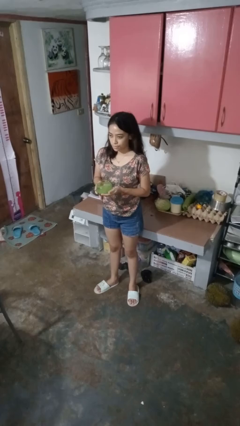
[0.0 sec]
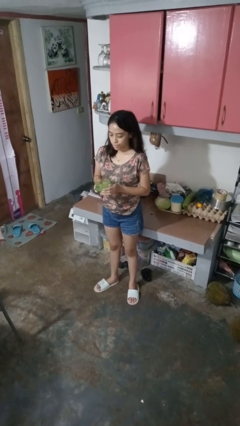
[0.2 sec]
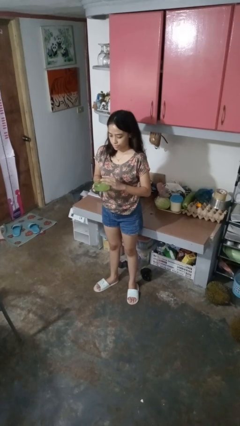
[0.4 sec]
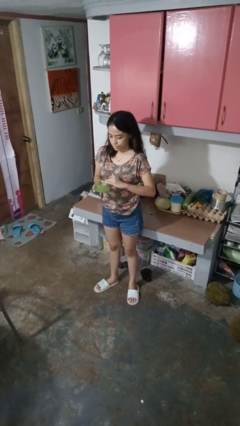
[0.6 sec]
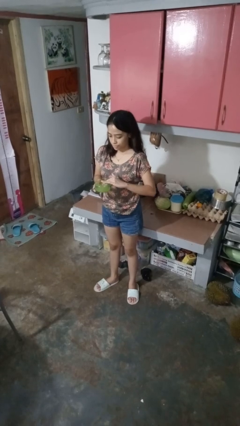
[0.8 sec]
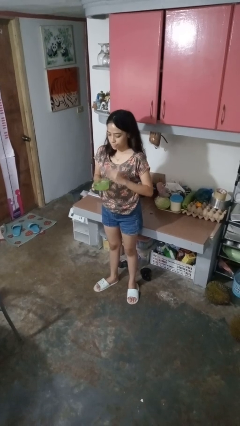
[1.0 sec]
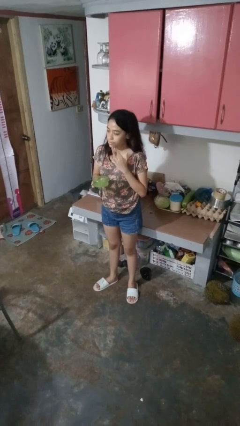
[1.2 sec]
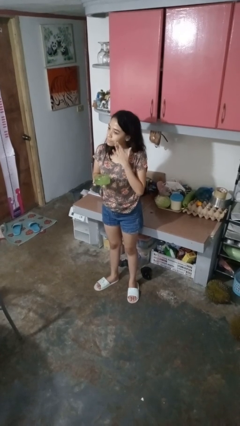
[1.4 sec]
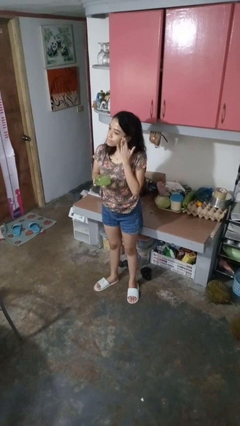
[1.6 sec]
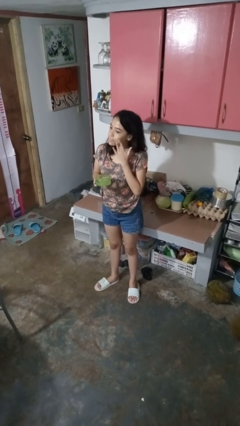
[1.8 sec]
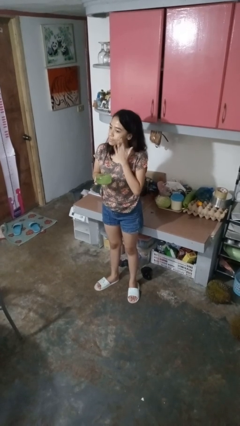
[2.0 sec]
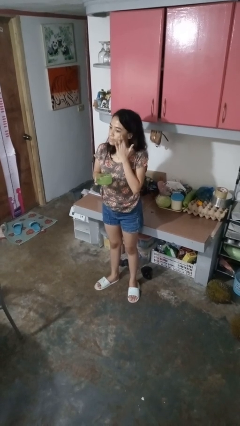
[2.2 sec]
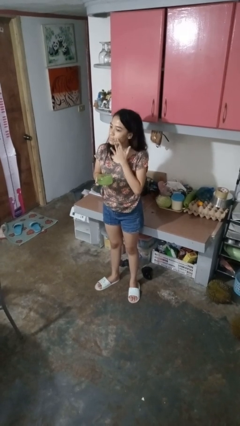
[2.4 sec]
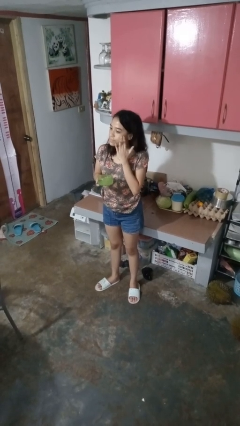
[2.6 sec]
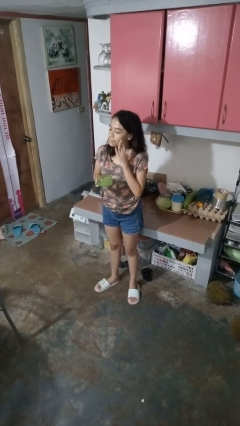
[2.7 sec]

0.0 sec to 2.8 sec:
person applies facial moisturizer

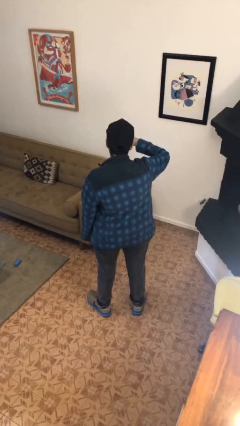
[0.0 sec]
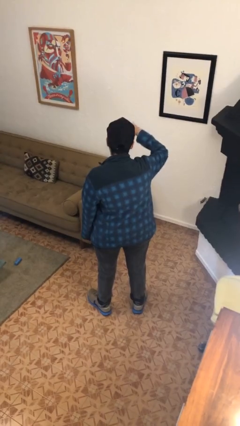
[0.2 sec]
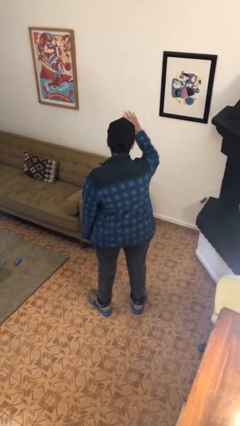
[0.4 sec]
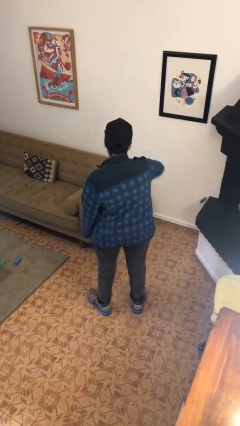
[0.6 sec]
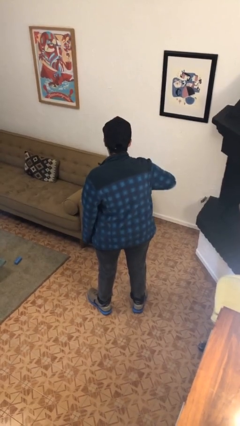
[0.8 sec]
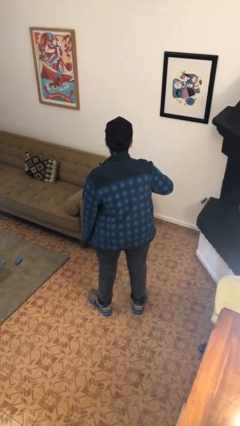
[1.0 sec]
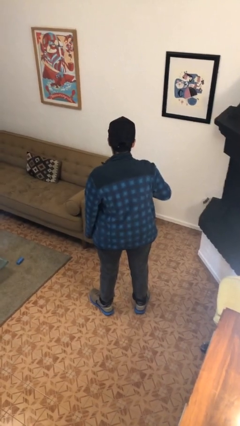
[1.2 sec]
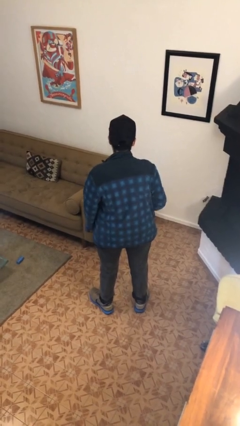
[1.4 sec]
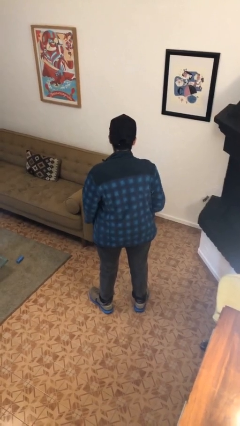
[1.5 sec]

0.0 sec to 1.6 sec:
person gestures swipe down

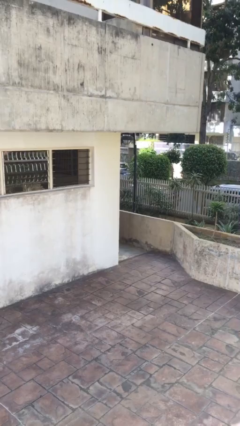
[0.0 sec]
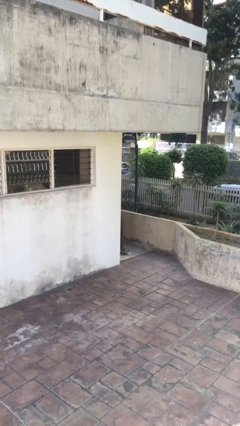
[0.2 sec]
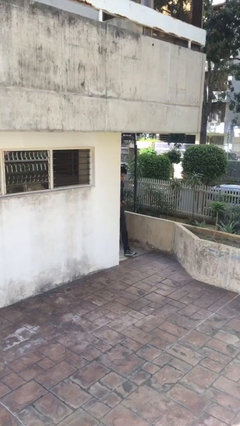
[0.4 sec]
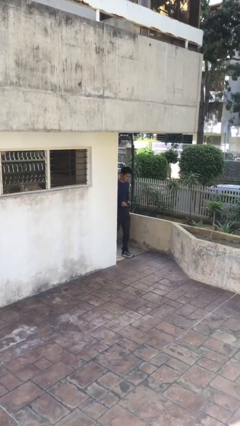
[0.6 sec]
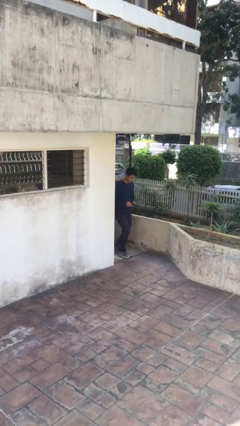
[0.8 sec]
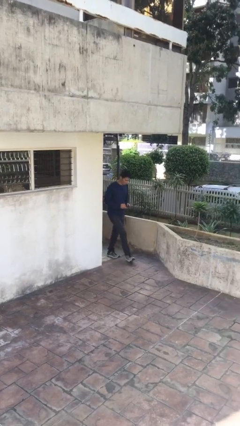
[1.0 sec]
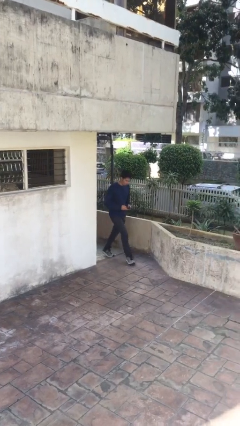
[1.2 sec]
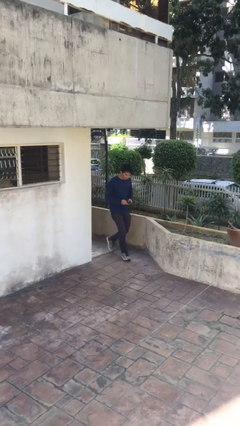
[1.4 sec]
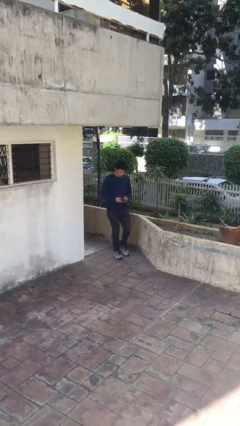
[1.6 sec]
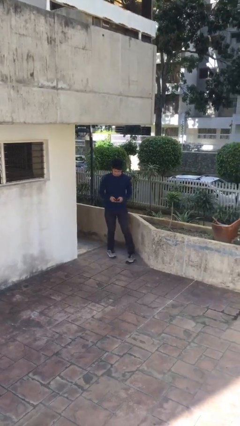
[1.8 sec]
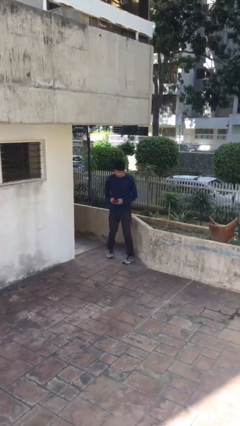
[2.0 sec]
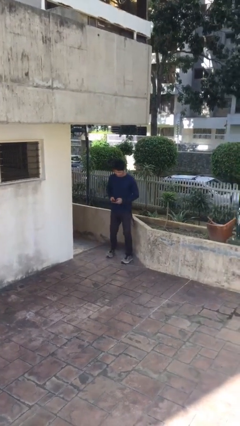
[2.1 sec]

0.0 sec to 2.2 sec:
person enters scene through structure

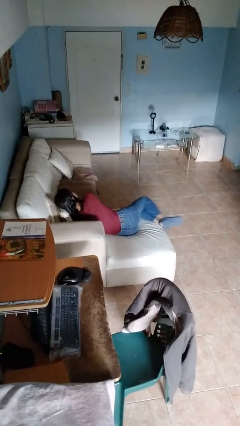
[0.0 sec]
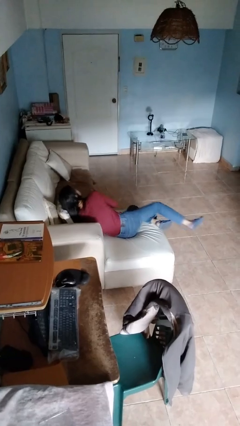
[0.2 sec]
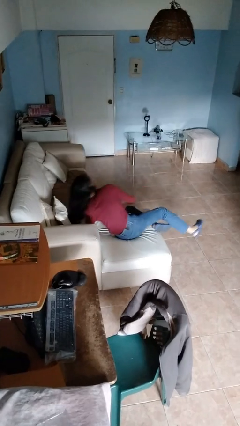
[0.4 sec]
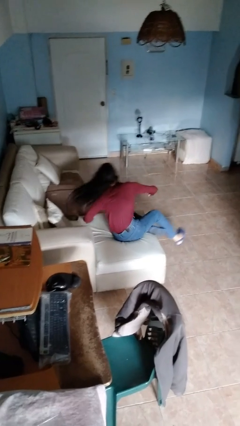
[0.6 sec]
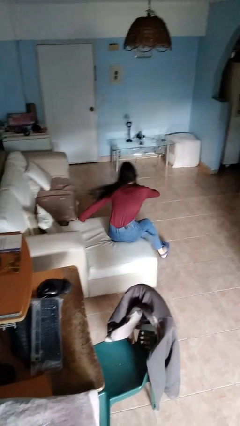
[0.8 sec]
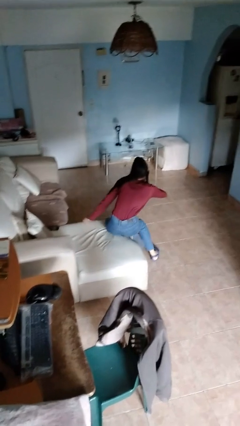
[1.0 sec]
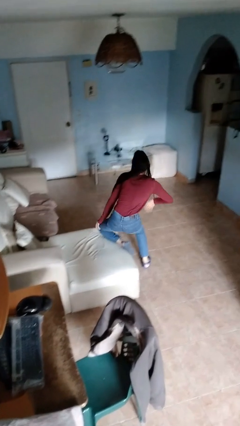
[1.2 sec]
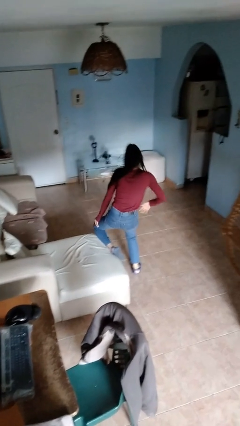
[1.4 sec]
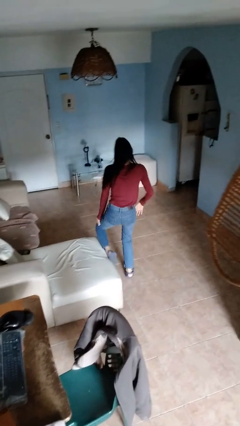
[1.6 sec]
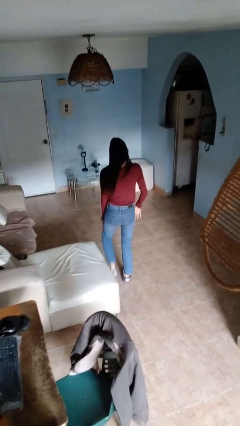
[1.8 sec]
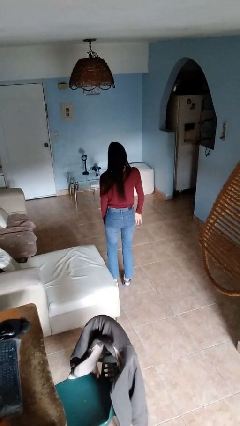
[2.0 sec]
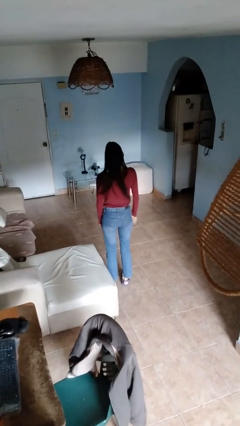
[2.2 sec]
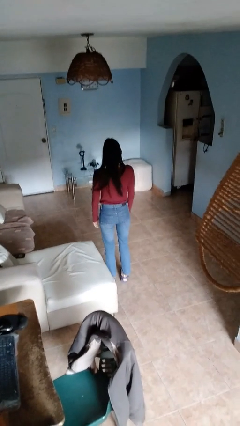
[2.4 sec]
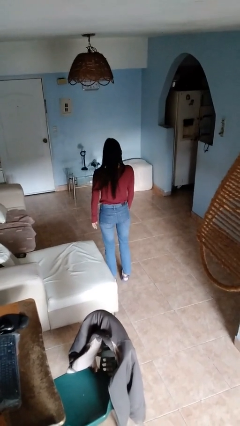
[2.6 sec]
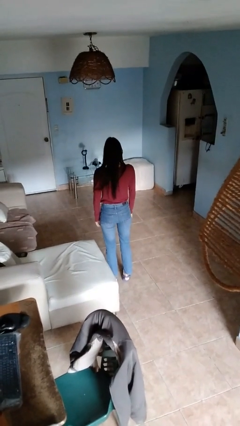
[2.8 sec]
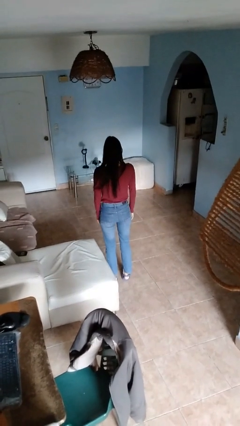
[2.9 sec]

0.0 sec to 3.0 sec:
person stands up

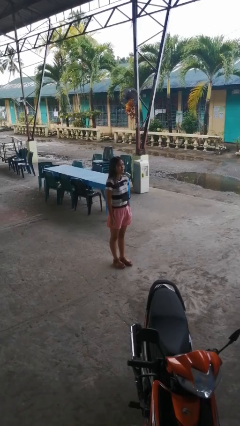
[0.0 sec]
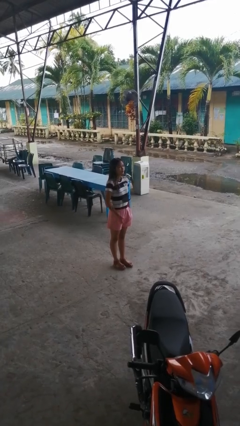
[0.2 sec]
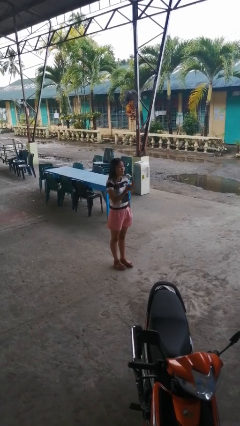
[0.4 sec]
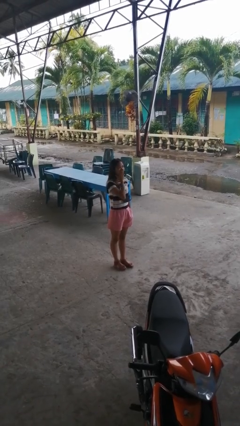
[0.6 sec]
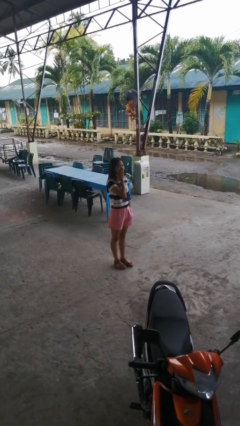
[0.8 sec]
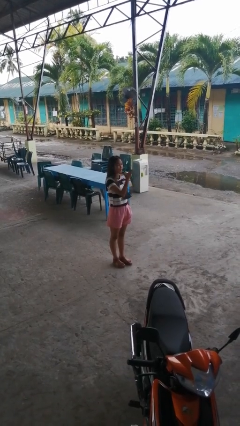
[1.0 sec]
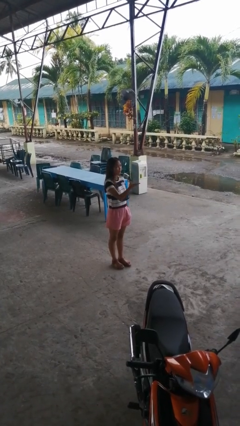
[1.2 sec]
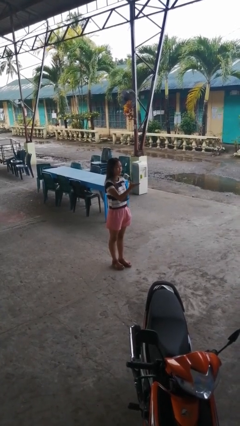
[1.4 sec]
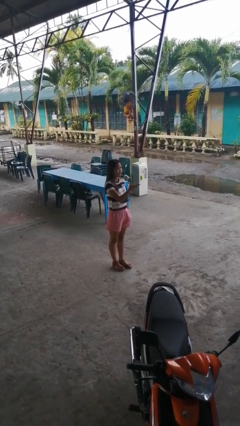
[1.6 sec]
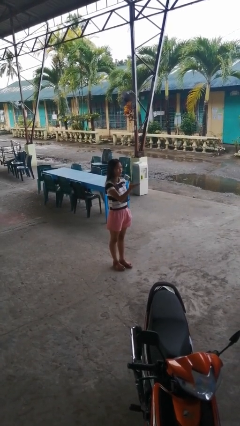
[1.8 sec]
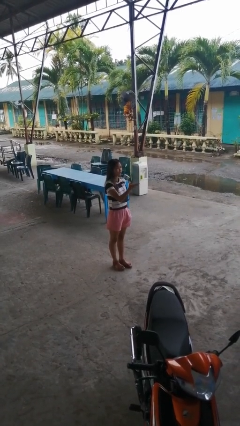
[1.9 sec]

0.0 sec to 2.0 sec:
person gestures blow kiss

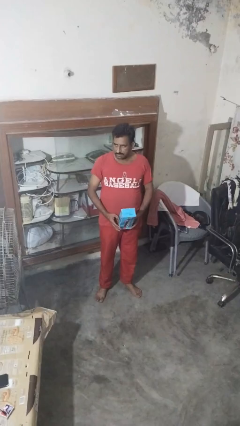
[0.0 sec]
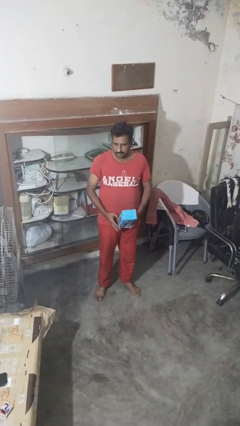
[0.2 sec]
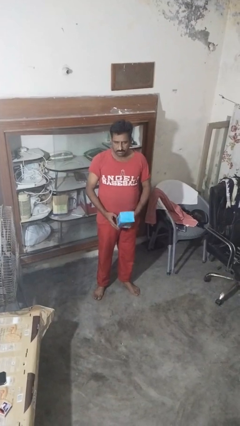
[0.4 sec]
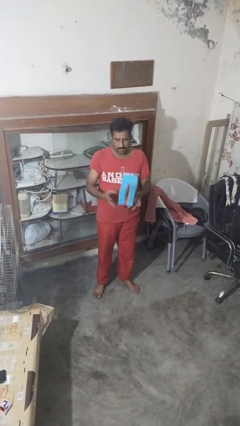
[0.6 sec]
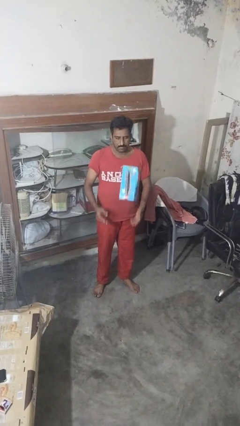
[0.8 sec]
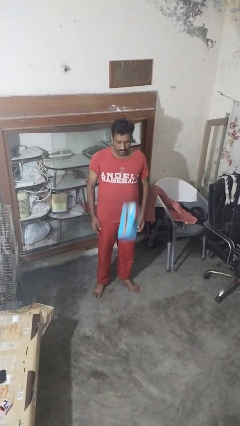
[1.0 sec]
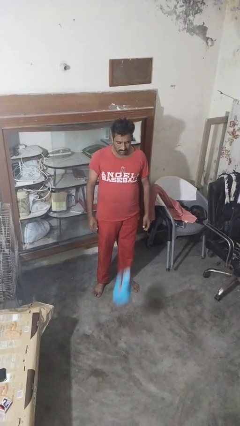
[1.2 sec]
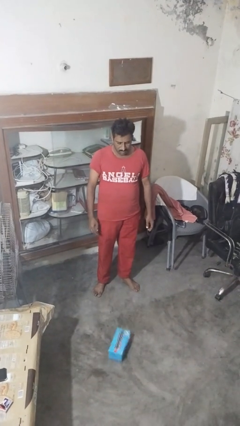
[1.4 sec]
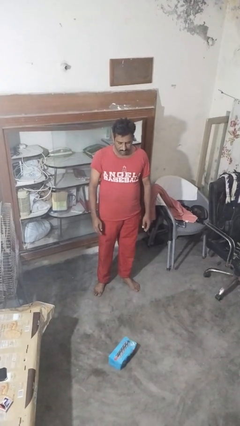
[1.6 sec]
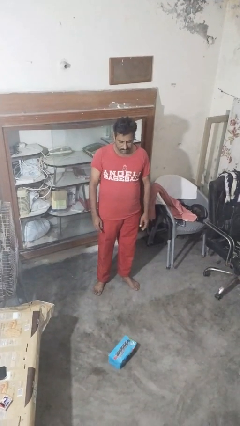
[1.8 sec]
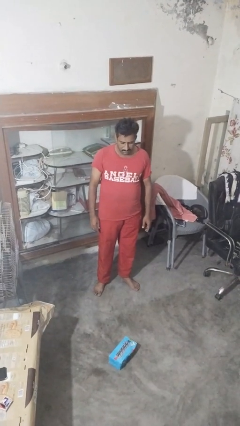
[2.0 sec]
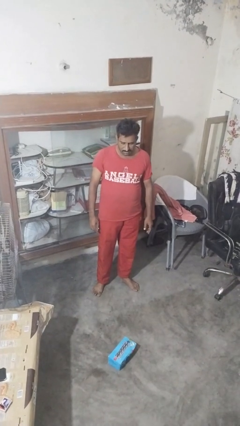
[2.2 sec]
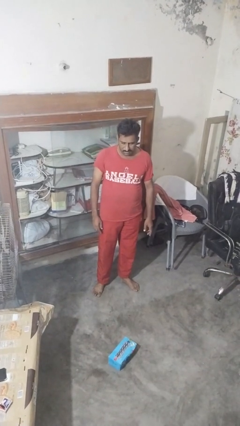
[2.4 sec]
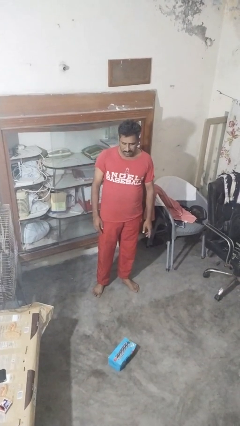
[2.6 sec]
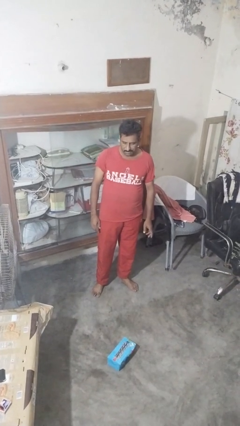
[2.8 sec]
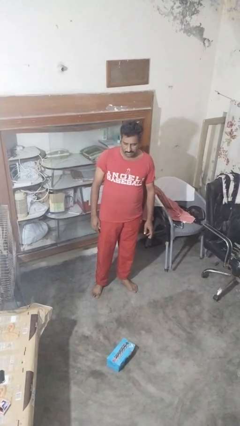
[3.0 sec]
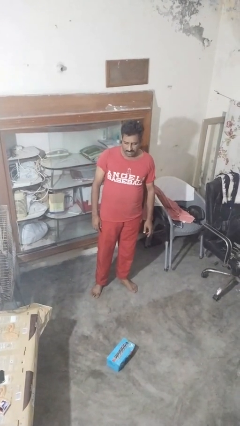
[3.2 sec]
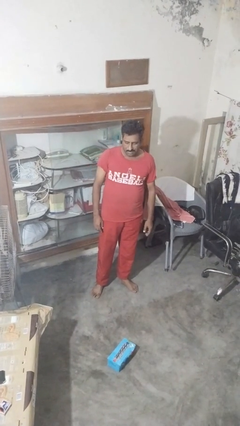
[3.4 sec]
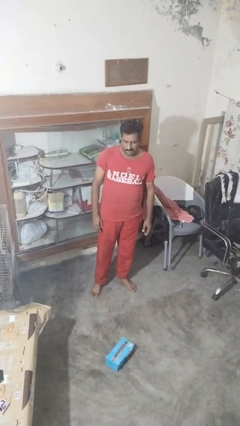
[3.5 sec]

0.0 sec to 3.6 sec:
person throws object into air

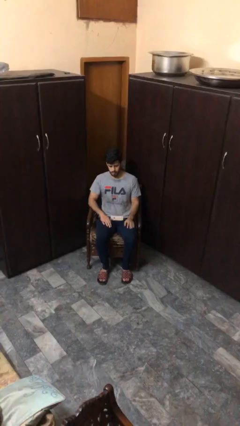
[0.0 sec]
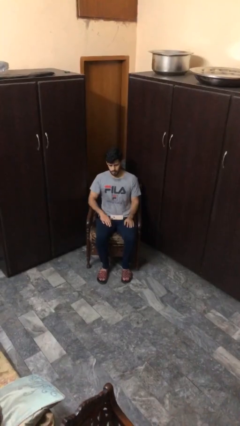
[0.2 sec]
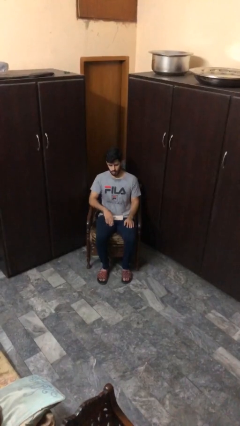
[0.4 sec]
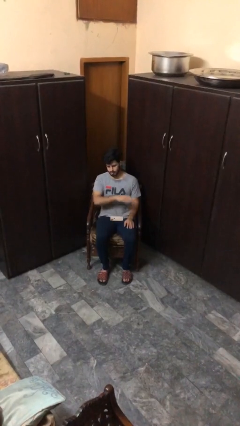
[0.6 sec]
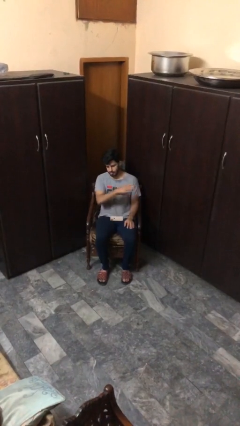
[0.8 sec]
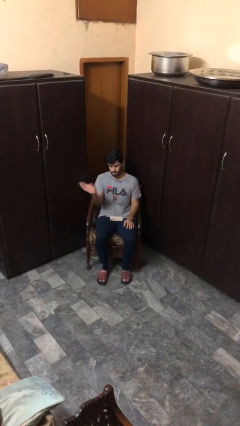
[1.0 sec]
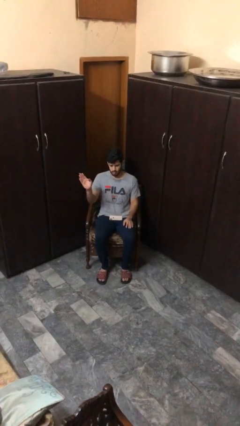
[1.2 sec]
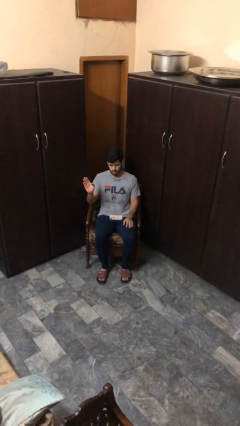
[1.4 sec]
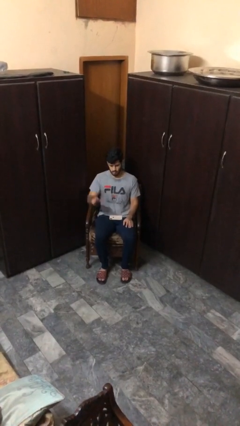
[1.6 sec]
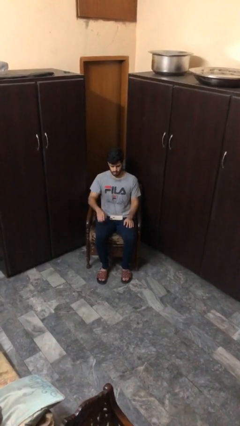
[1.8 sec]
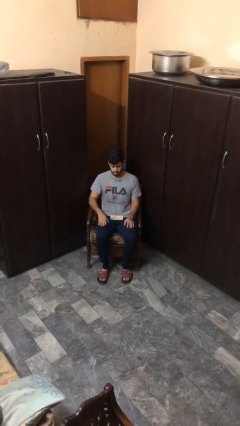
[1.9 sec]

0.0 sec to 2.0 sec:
person gestures swipe right
